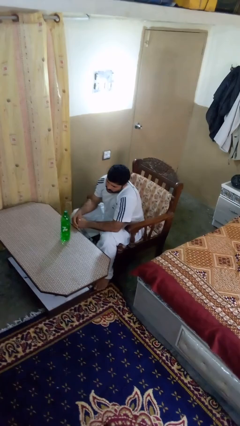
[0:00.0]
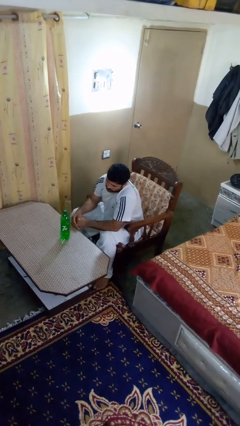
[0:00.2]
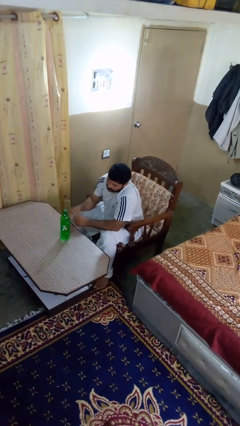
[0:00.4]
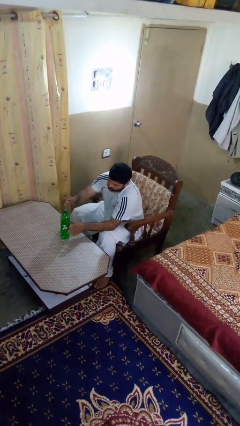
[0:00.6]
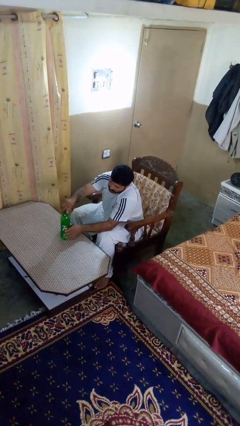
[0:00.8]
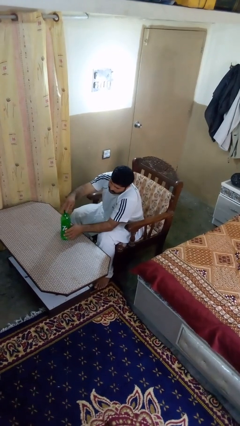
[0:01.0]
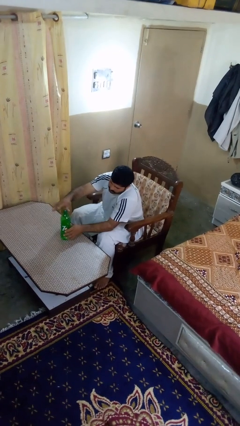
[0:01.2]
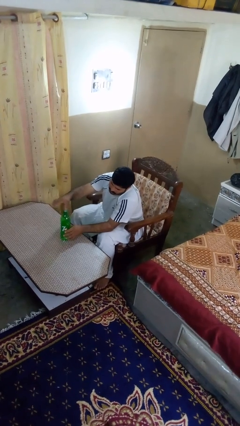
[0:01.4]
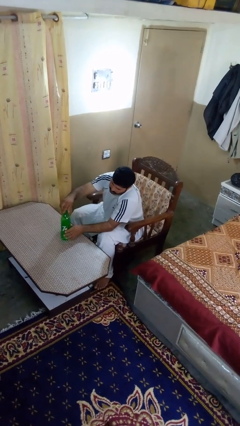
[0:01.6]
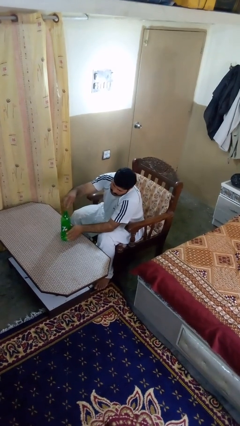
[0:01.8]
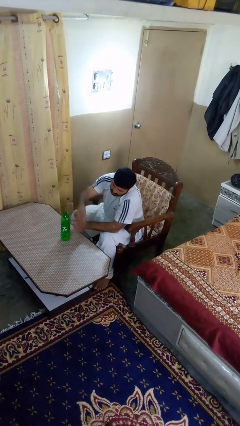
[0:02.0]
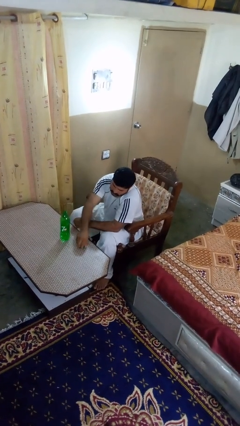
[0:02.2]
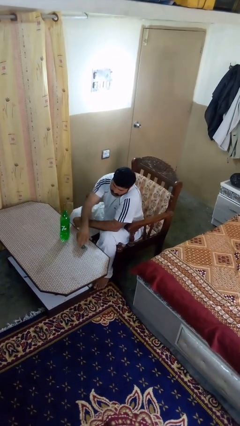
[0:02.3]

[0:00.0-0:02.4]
person unscrews lid from bottle

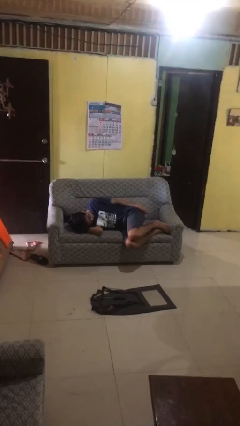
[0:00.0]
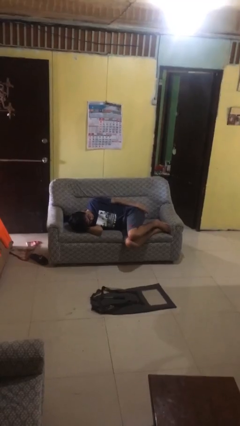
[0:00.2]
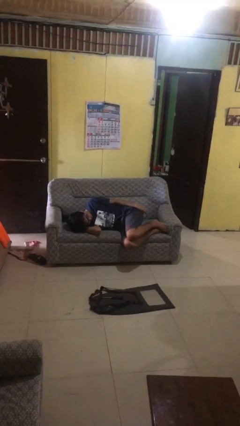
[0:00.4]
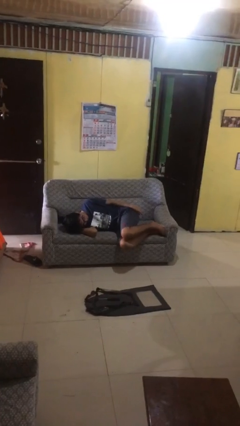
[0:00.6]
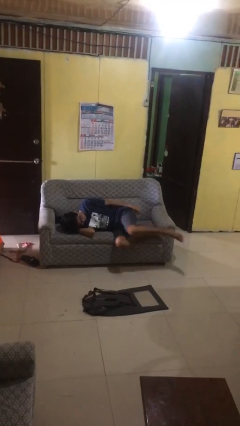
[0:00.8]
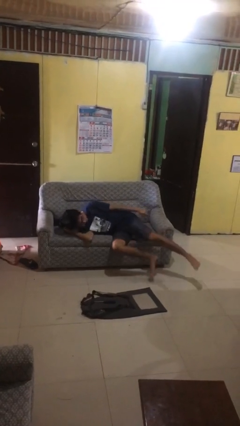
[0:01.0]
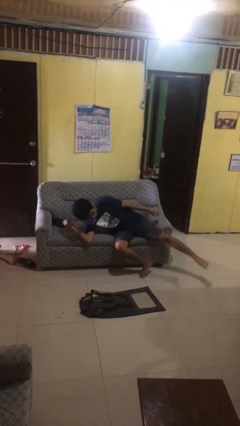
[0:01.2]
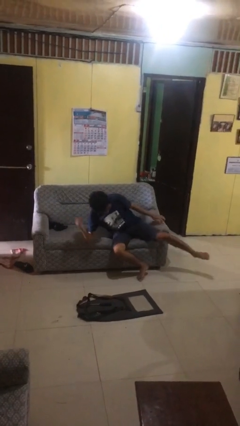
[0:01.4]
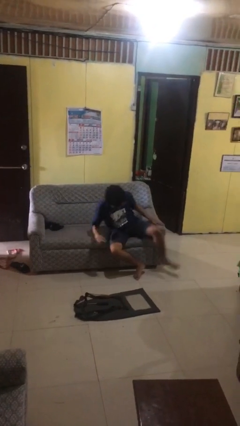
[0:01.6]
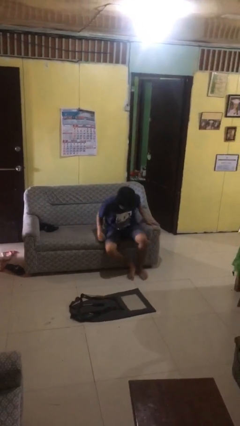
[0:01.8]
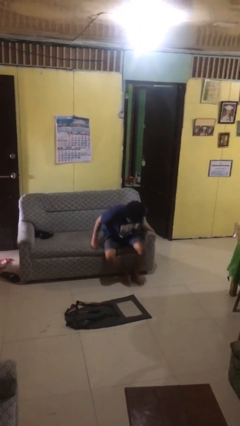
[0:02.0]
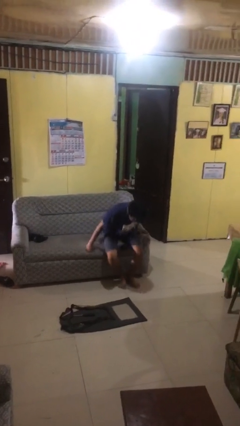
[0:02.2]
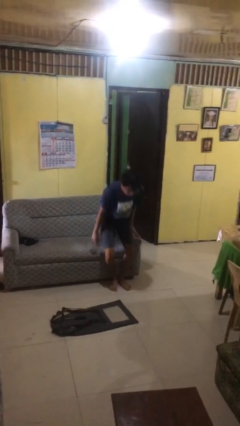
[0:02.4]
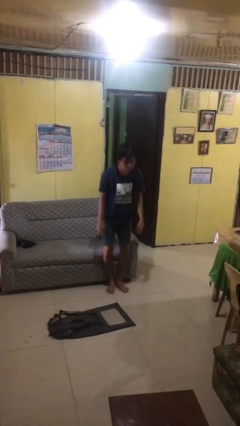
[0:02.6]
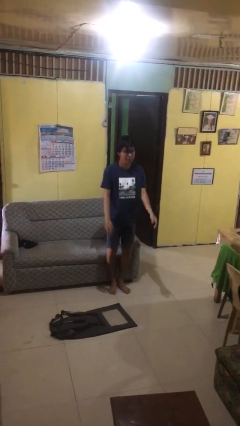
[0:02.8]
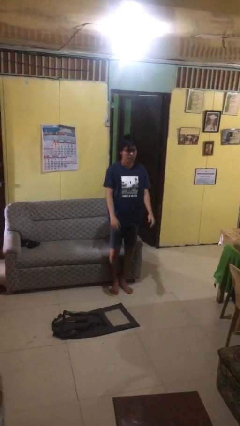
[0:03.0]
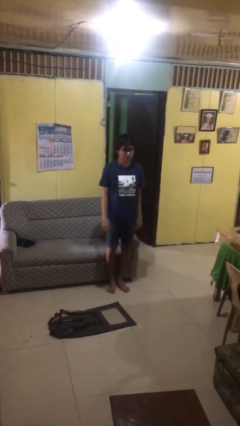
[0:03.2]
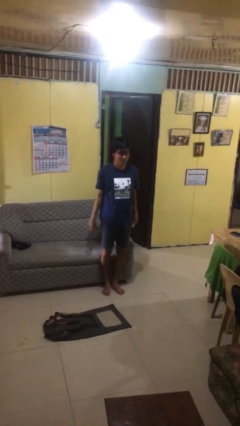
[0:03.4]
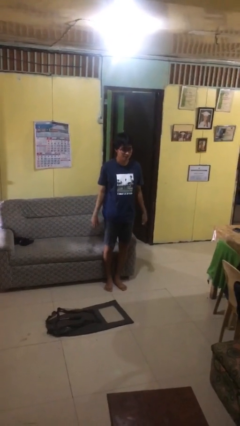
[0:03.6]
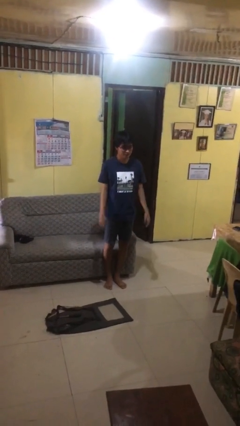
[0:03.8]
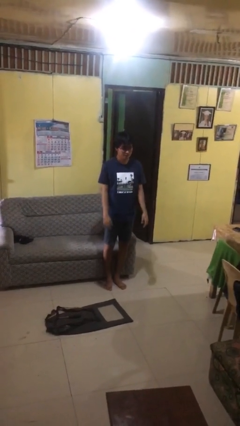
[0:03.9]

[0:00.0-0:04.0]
person stands up

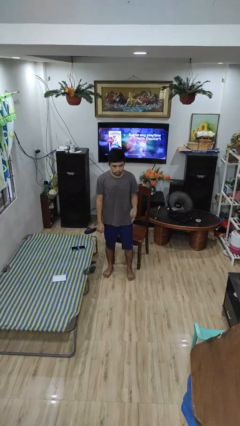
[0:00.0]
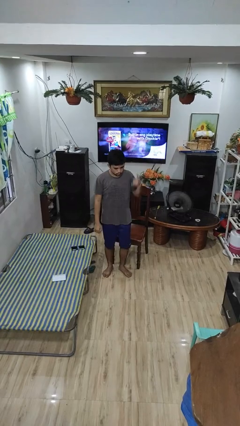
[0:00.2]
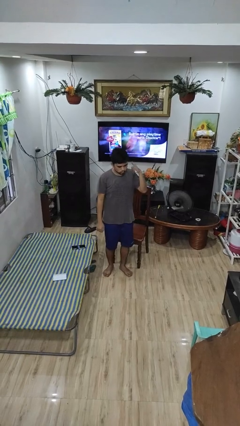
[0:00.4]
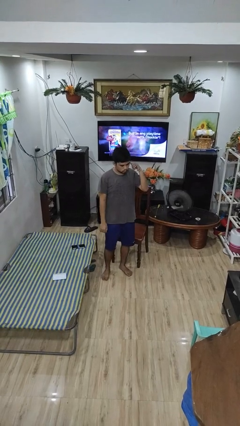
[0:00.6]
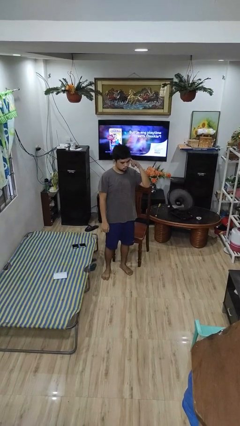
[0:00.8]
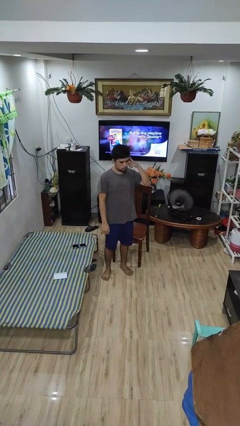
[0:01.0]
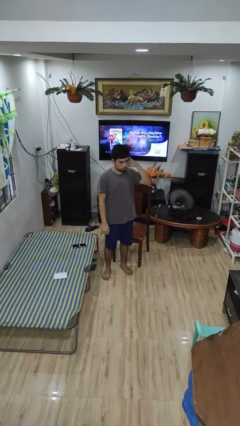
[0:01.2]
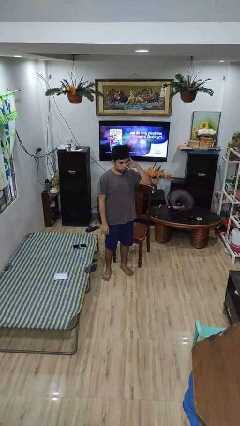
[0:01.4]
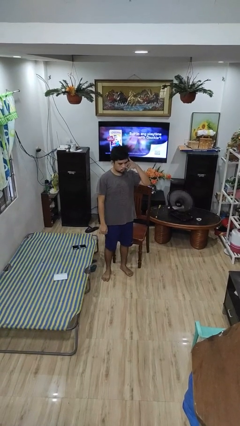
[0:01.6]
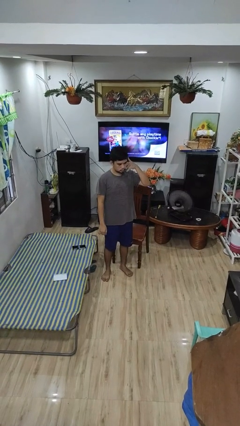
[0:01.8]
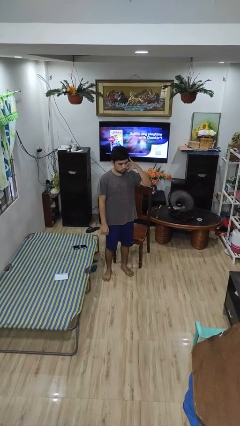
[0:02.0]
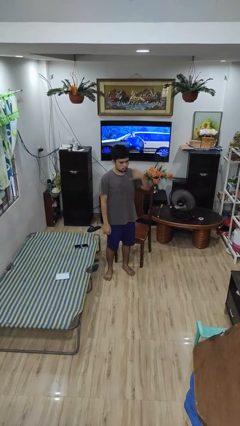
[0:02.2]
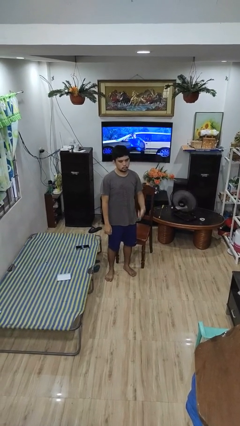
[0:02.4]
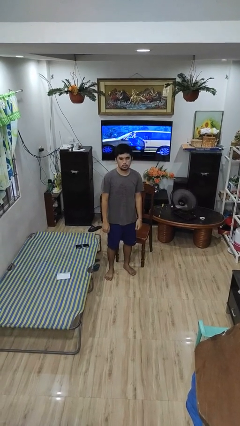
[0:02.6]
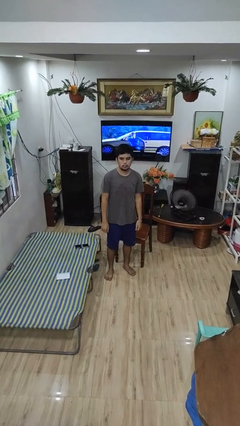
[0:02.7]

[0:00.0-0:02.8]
person gestures call me

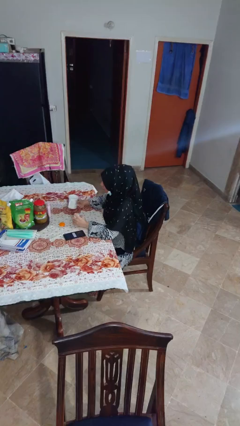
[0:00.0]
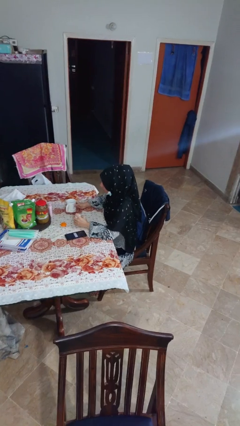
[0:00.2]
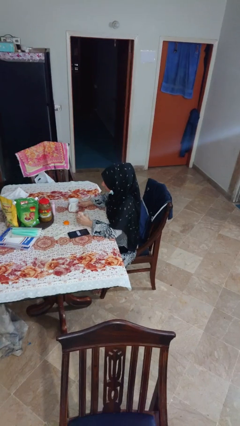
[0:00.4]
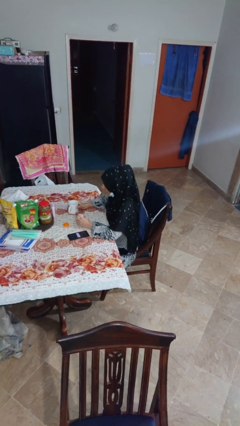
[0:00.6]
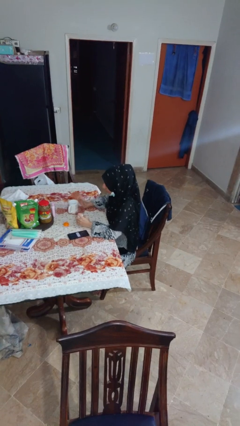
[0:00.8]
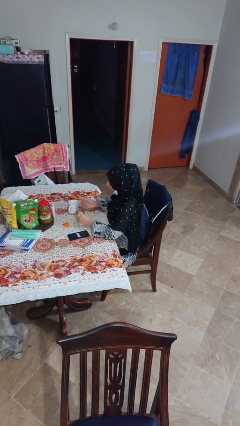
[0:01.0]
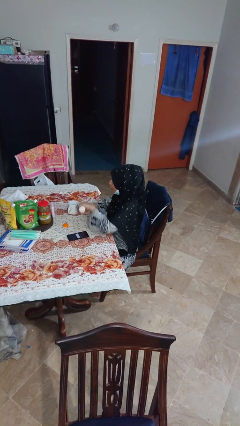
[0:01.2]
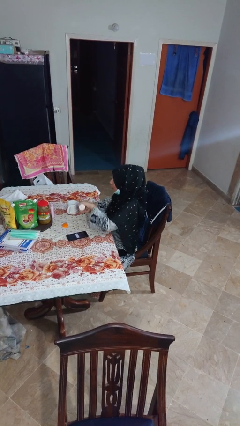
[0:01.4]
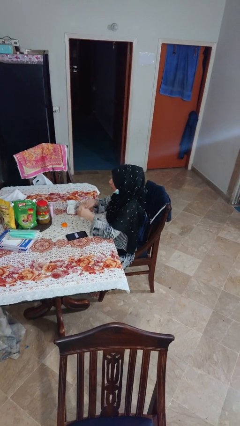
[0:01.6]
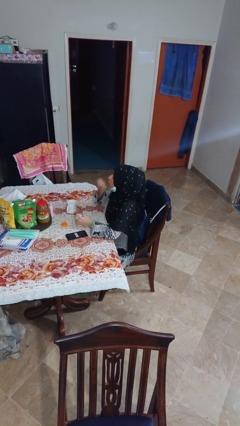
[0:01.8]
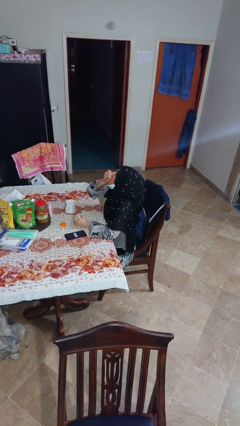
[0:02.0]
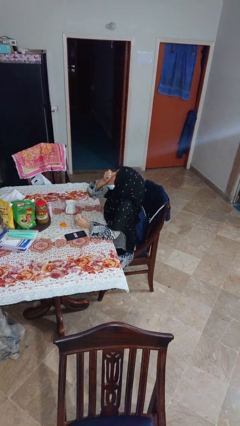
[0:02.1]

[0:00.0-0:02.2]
person takes medicine pills

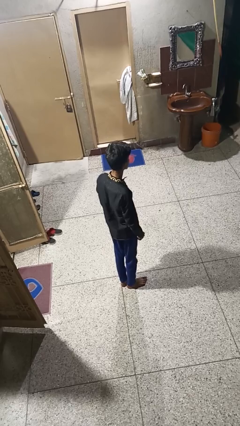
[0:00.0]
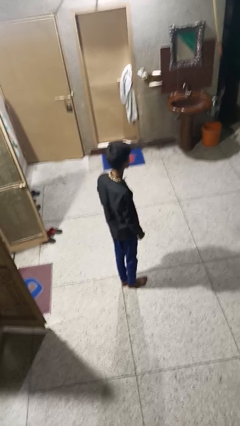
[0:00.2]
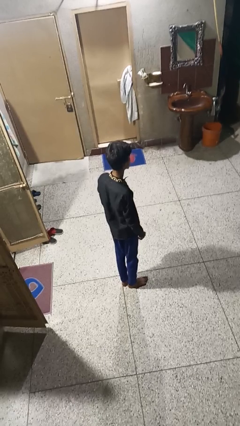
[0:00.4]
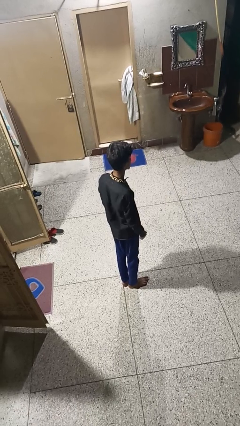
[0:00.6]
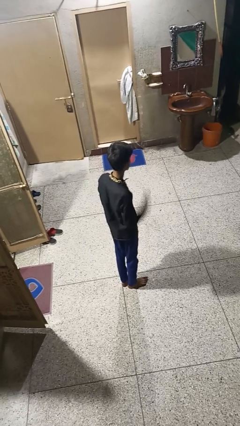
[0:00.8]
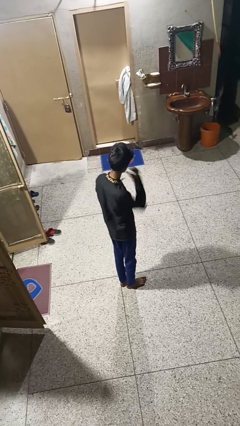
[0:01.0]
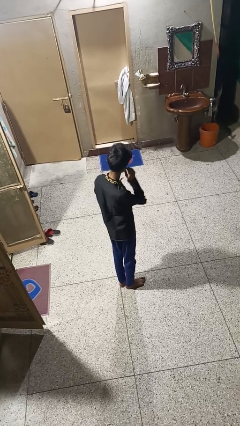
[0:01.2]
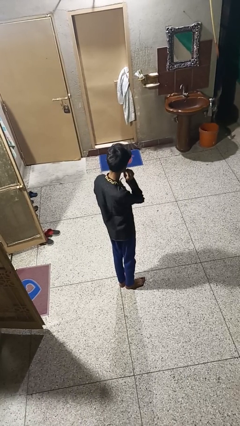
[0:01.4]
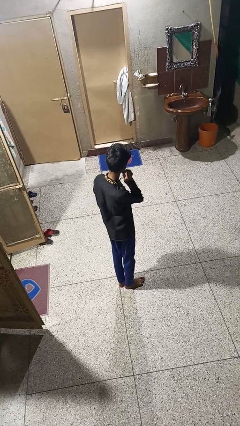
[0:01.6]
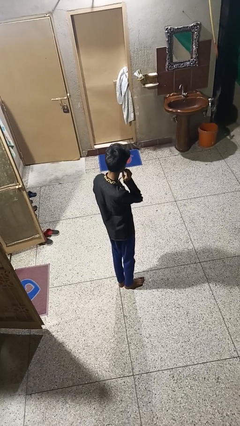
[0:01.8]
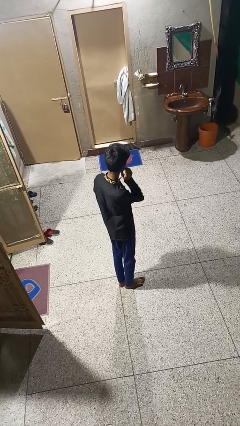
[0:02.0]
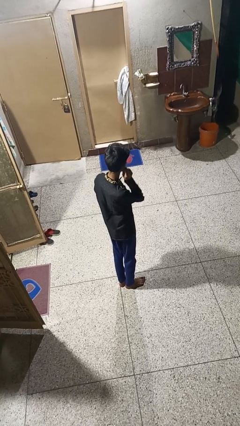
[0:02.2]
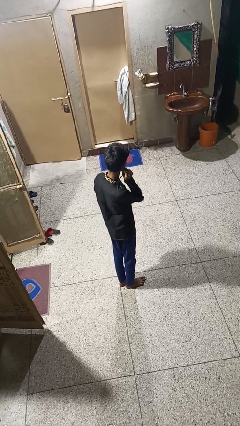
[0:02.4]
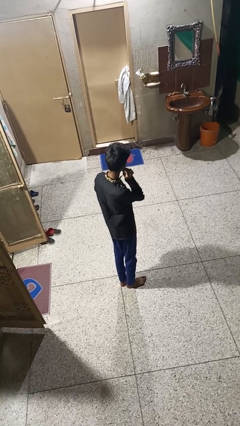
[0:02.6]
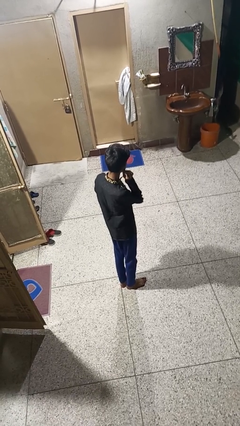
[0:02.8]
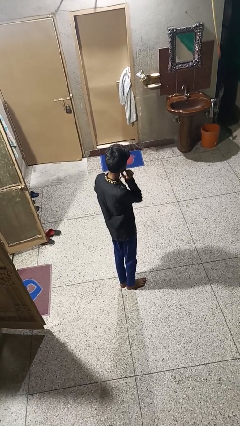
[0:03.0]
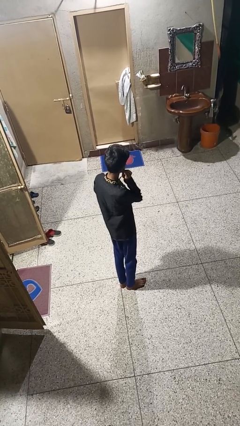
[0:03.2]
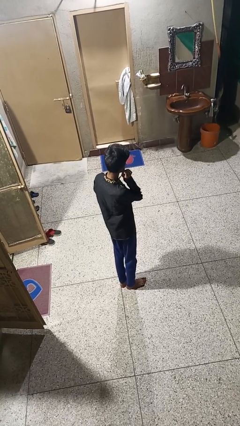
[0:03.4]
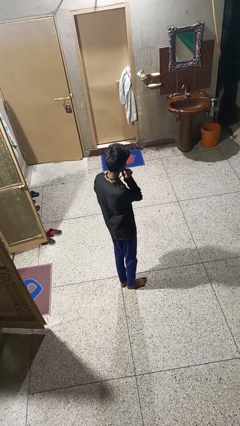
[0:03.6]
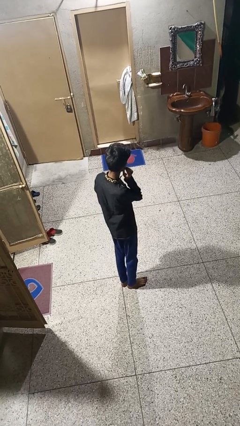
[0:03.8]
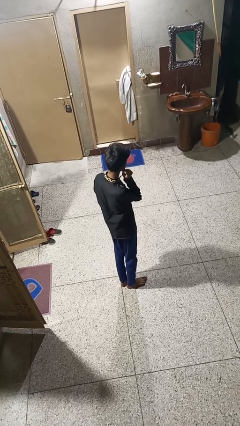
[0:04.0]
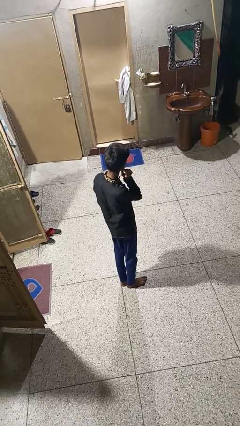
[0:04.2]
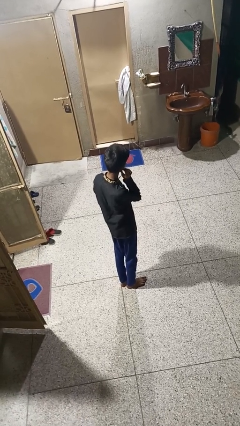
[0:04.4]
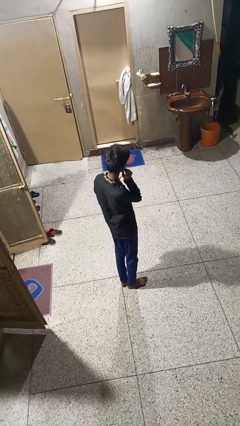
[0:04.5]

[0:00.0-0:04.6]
person touches earlobe

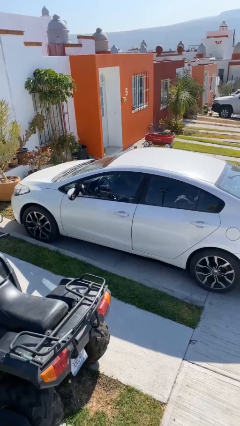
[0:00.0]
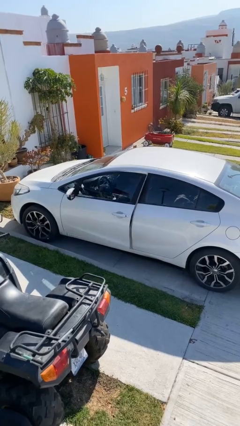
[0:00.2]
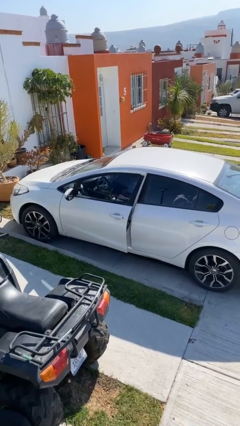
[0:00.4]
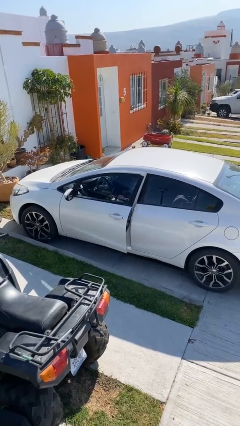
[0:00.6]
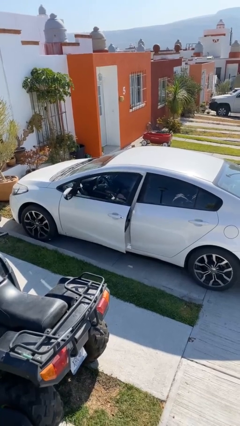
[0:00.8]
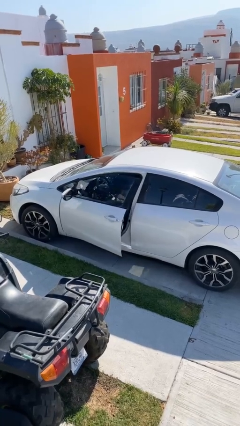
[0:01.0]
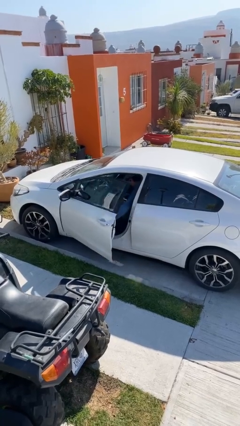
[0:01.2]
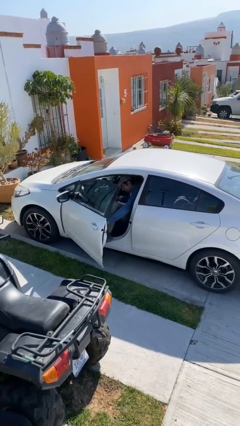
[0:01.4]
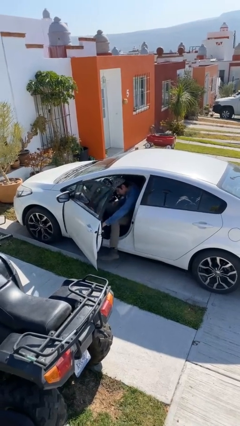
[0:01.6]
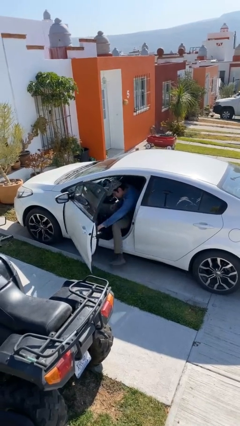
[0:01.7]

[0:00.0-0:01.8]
person opens car door
